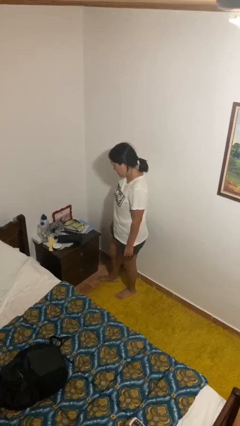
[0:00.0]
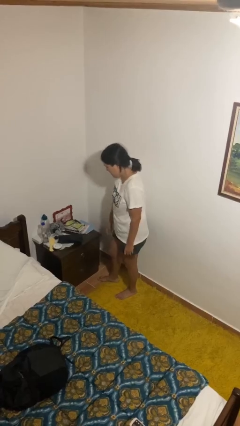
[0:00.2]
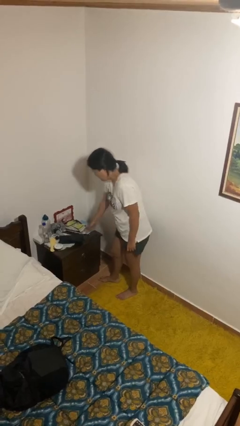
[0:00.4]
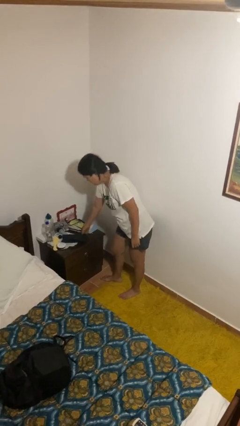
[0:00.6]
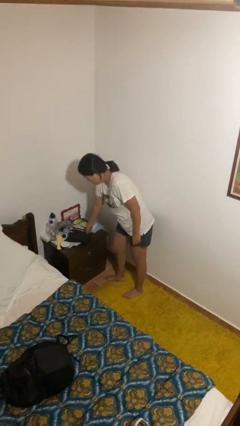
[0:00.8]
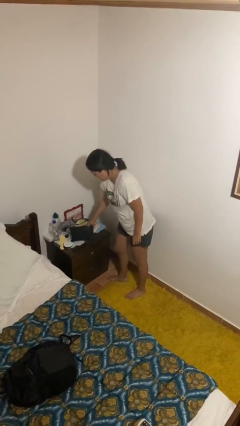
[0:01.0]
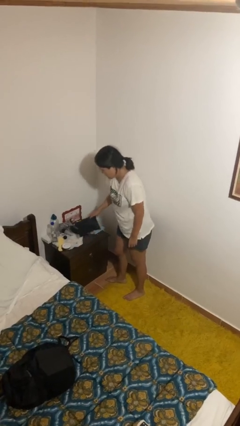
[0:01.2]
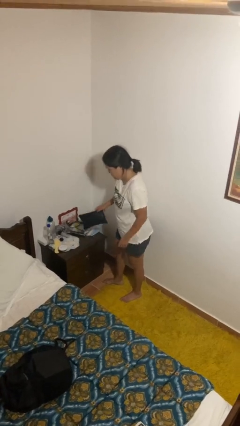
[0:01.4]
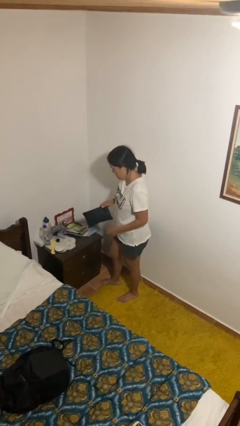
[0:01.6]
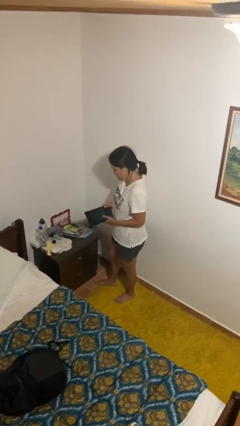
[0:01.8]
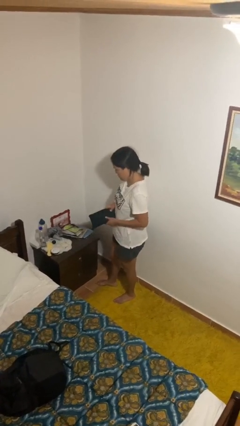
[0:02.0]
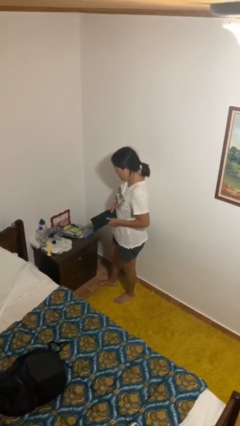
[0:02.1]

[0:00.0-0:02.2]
person picks up object from countertop

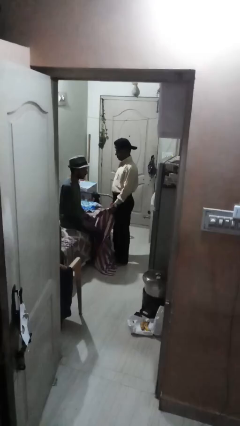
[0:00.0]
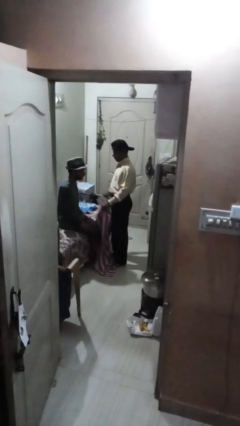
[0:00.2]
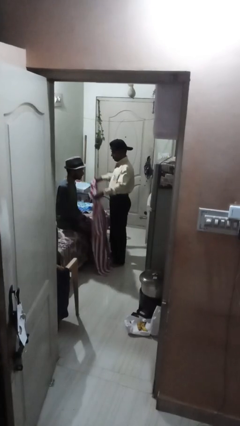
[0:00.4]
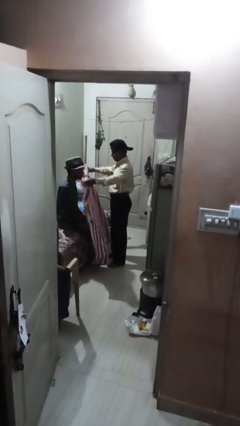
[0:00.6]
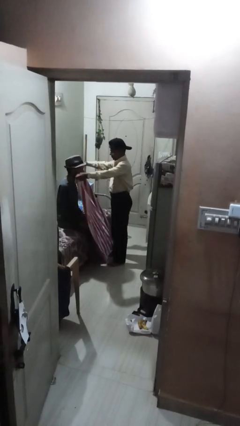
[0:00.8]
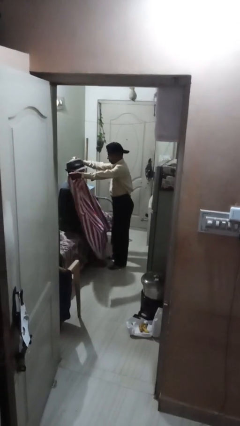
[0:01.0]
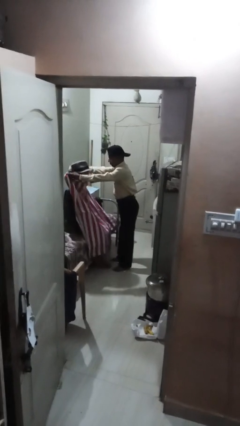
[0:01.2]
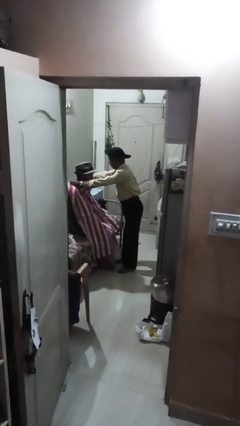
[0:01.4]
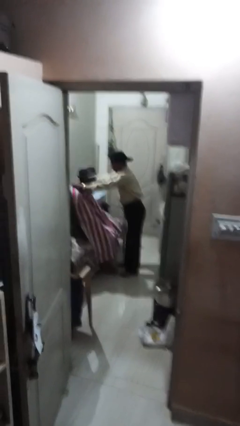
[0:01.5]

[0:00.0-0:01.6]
person covers friend with blanket

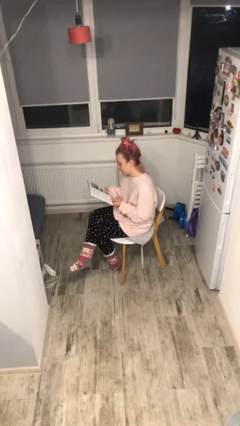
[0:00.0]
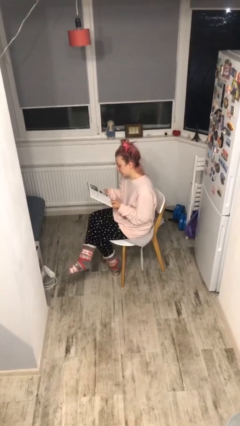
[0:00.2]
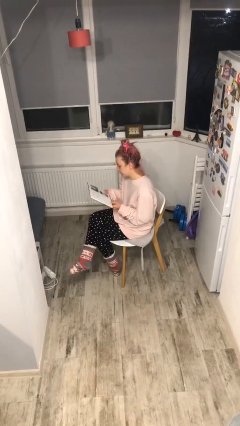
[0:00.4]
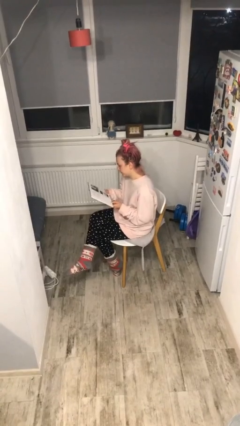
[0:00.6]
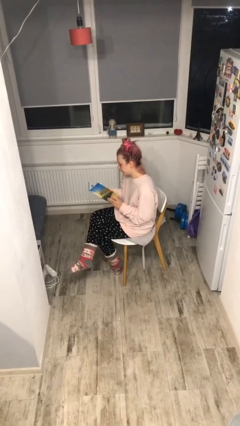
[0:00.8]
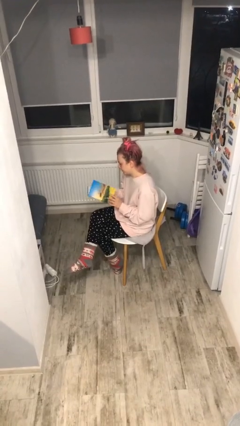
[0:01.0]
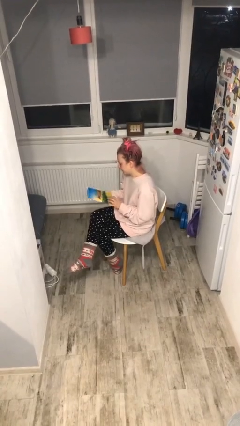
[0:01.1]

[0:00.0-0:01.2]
person reads document

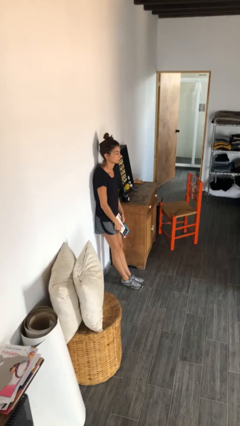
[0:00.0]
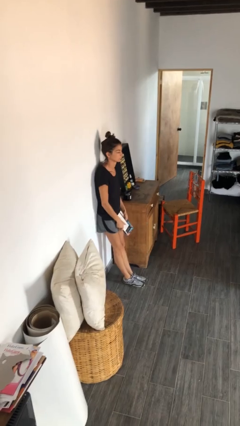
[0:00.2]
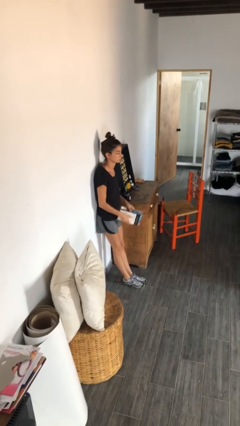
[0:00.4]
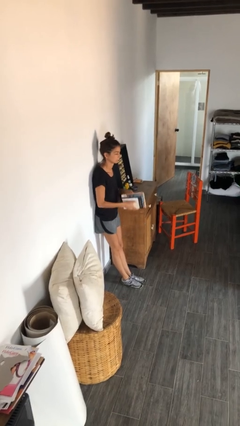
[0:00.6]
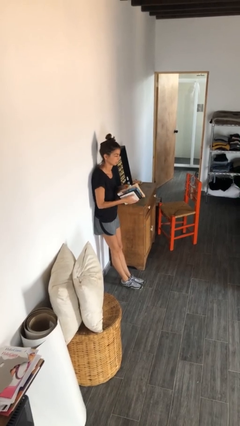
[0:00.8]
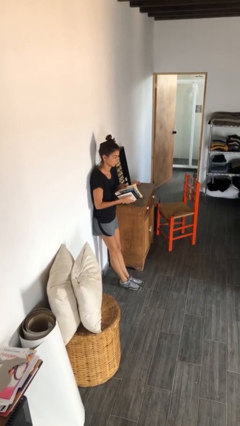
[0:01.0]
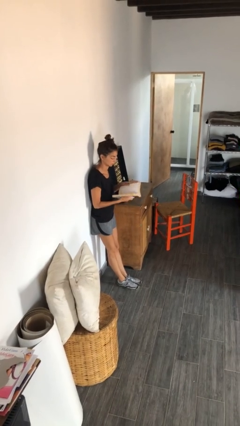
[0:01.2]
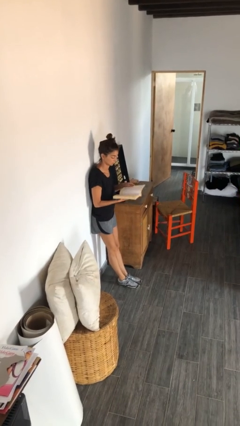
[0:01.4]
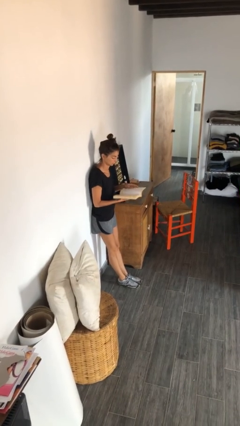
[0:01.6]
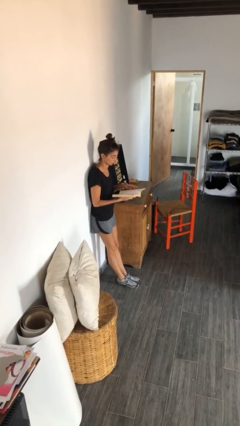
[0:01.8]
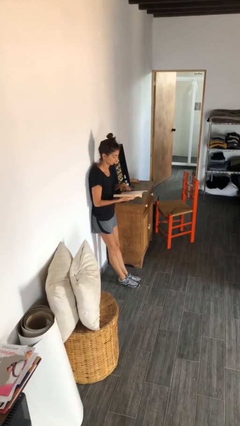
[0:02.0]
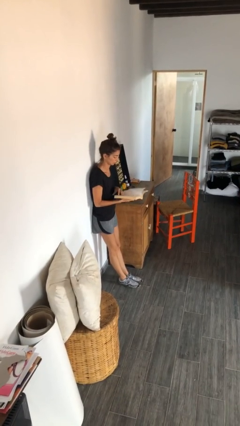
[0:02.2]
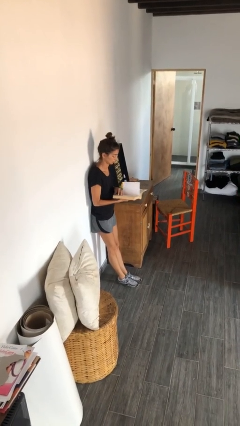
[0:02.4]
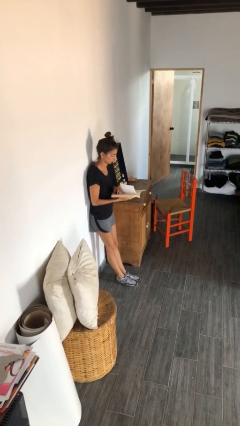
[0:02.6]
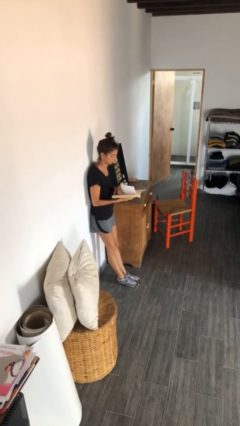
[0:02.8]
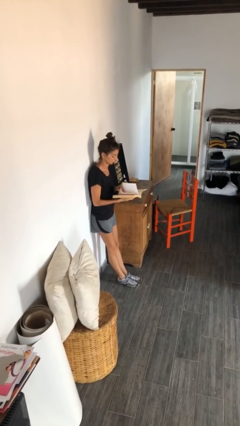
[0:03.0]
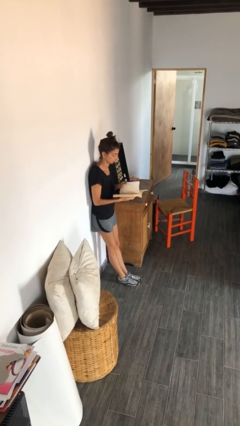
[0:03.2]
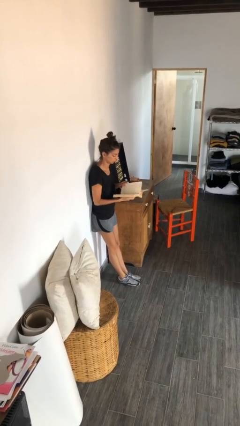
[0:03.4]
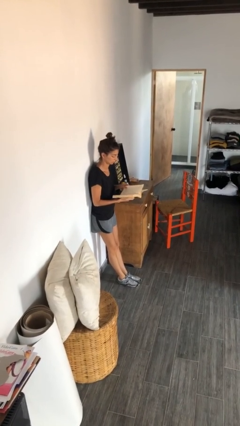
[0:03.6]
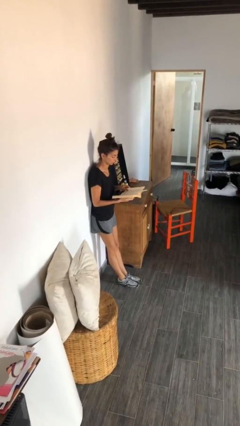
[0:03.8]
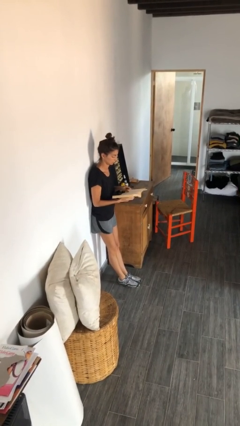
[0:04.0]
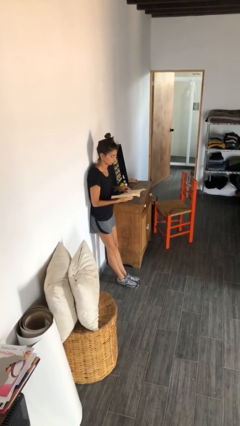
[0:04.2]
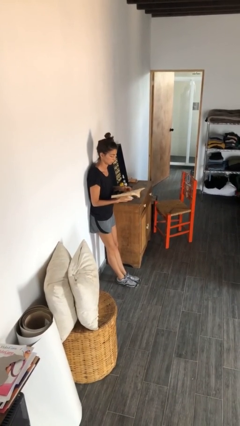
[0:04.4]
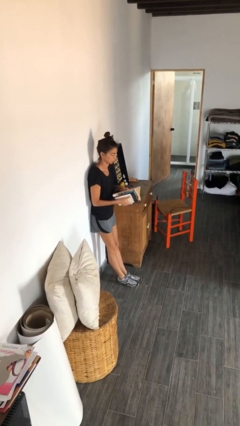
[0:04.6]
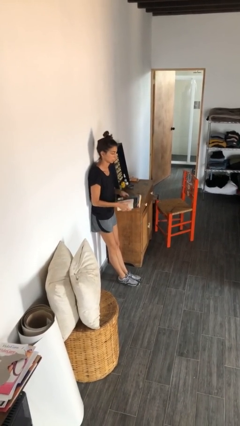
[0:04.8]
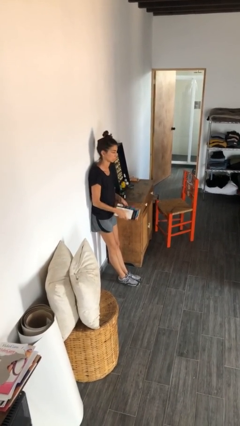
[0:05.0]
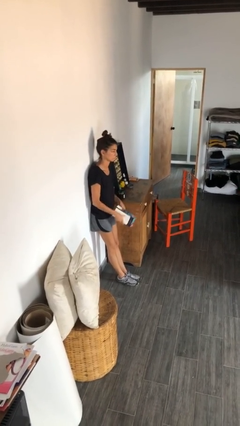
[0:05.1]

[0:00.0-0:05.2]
person reads book

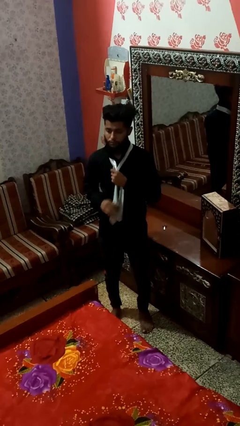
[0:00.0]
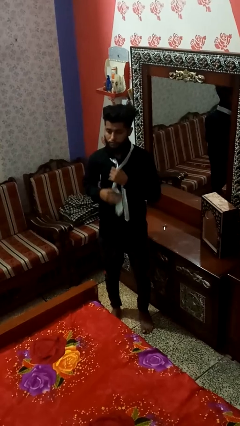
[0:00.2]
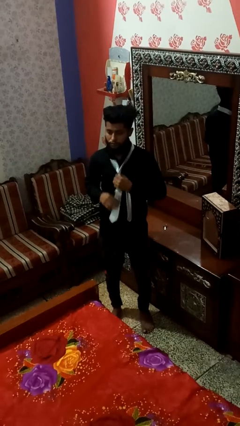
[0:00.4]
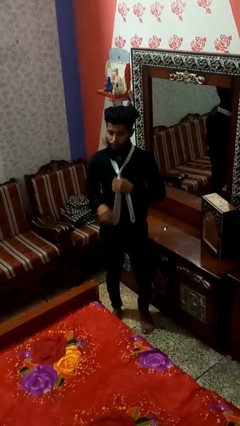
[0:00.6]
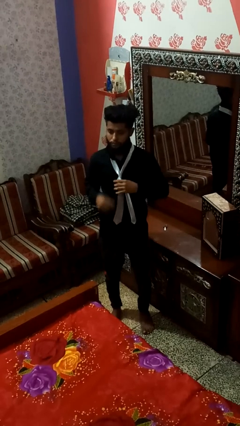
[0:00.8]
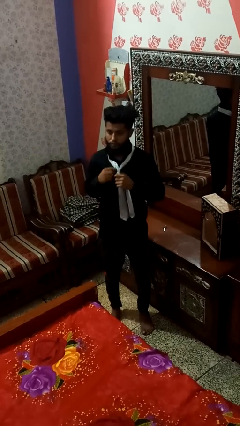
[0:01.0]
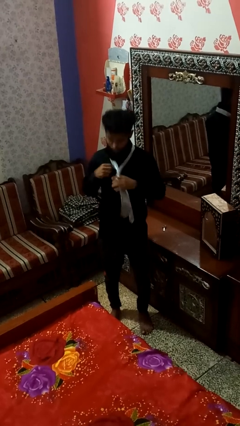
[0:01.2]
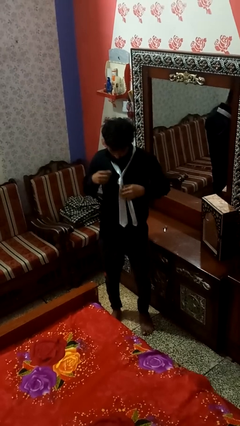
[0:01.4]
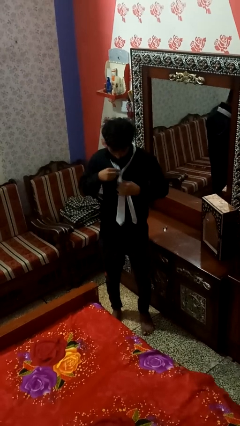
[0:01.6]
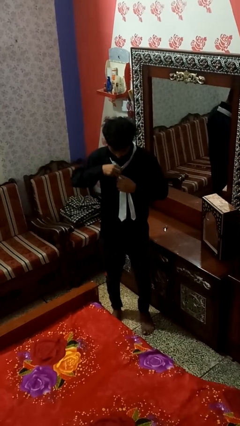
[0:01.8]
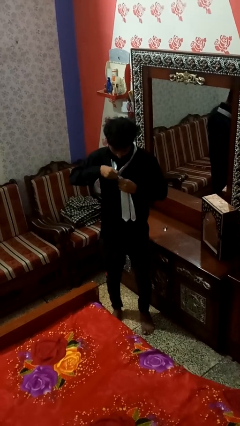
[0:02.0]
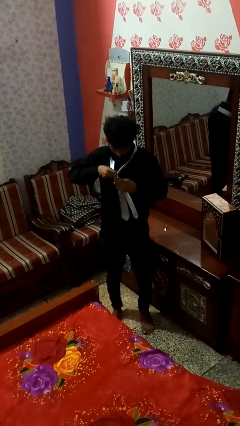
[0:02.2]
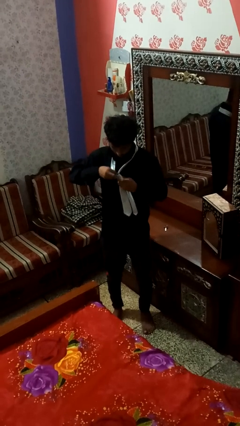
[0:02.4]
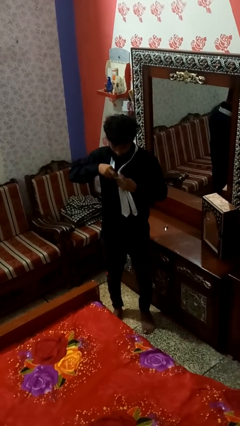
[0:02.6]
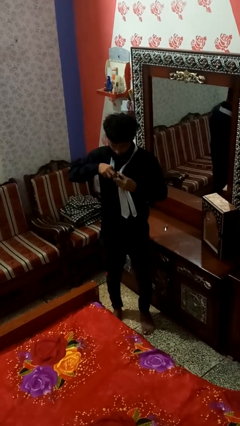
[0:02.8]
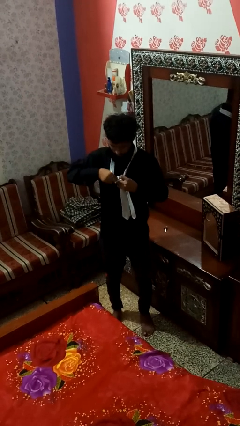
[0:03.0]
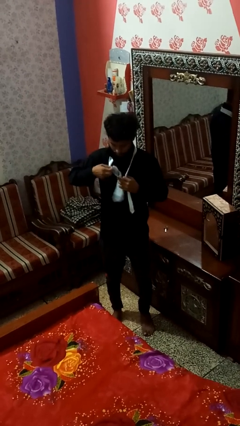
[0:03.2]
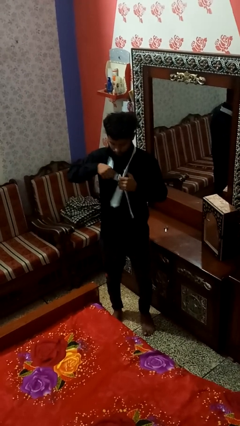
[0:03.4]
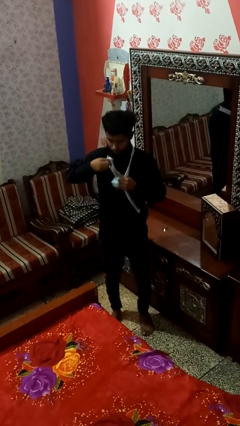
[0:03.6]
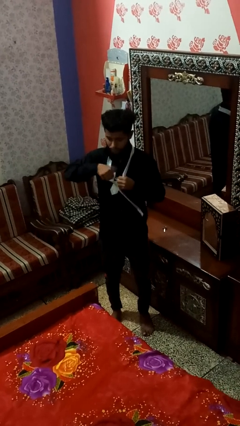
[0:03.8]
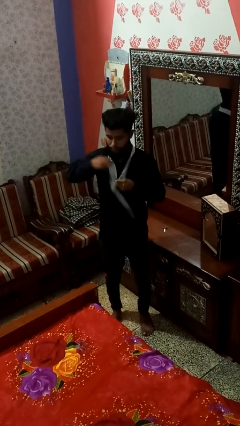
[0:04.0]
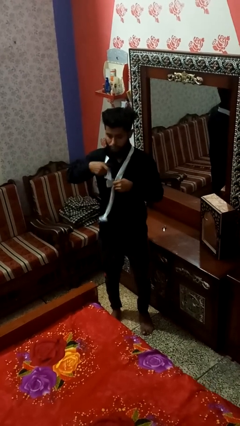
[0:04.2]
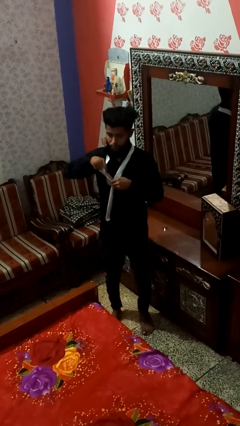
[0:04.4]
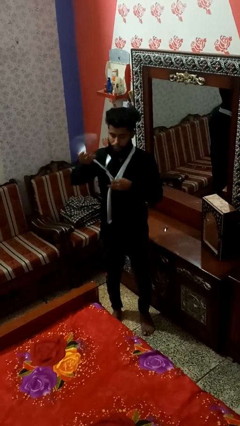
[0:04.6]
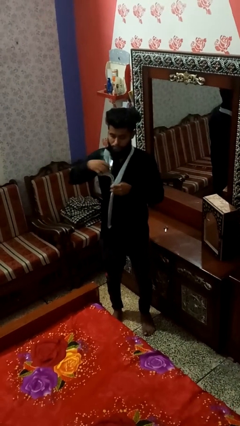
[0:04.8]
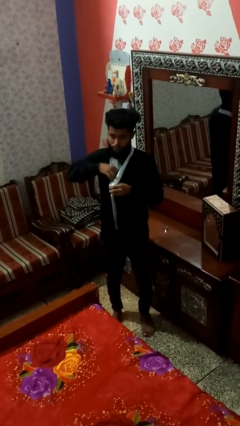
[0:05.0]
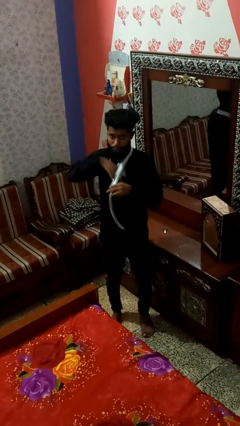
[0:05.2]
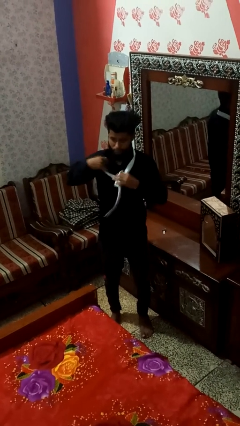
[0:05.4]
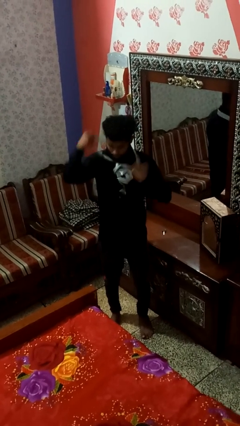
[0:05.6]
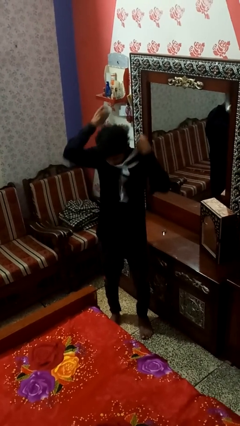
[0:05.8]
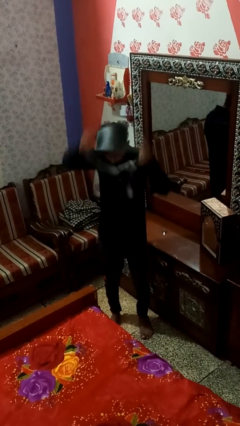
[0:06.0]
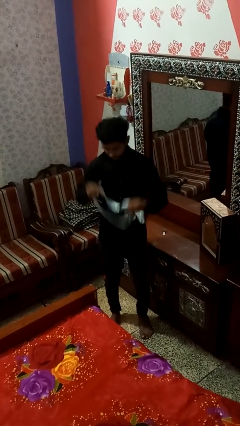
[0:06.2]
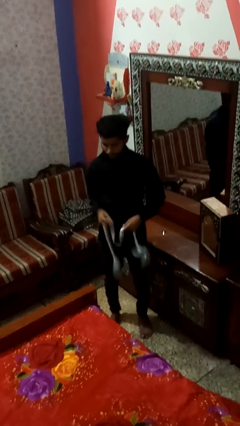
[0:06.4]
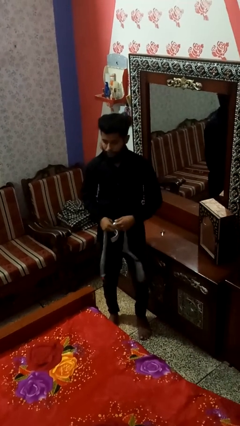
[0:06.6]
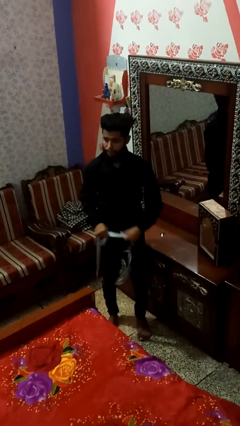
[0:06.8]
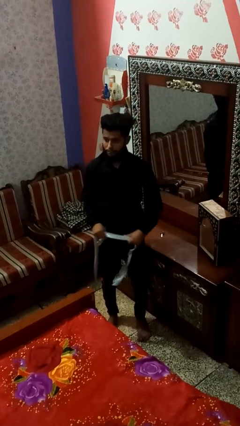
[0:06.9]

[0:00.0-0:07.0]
person takes off necktie

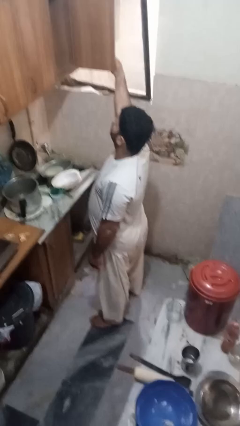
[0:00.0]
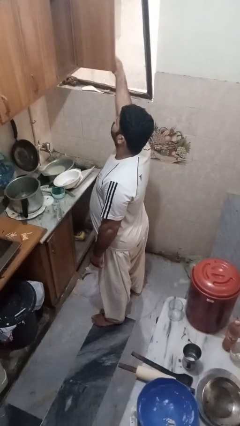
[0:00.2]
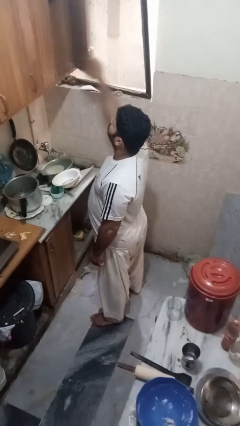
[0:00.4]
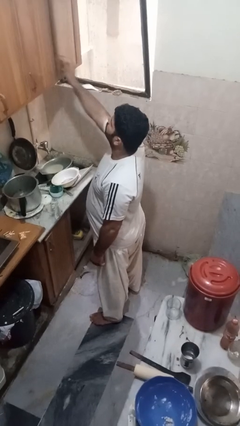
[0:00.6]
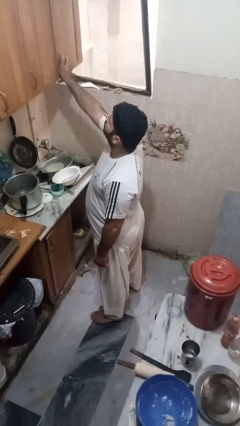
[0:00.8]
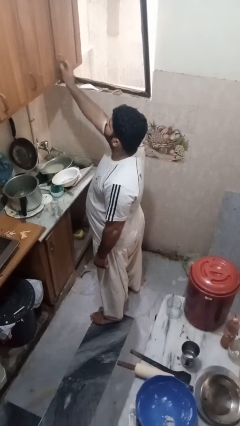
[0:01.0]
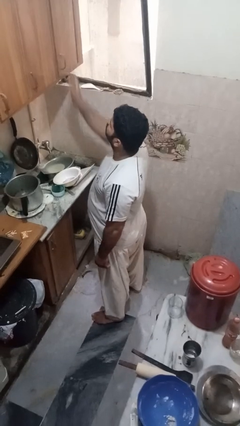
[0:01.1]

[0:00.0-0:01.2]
person closes cabinet
